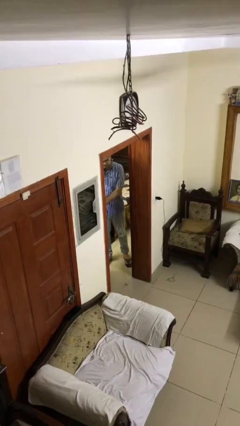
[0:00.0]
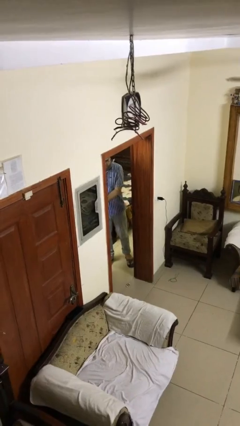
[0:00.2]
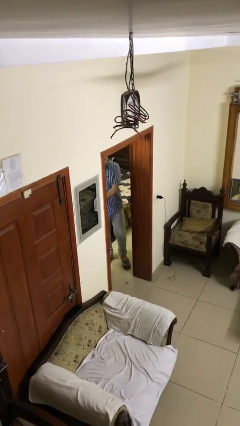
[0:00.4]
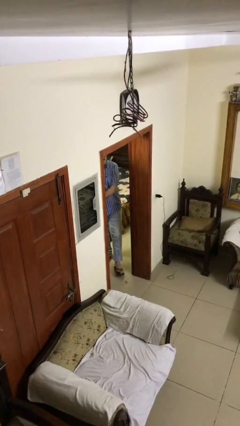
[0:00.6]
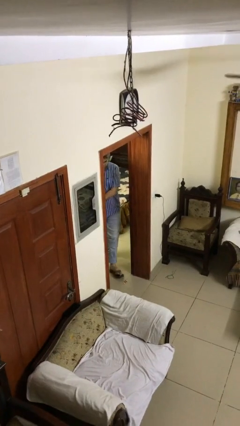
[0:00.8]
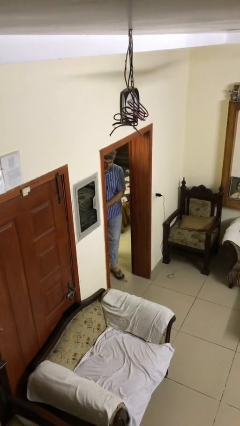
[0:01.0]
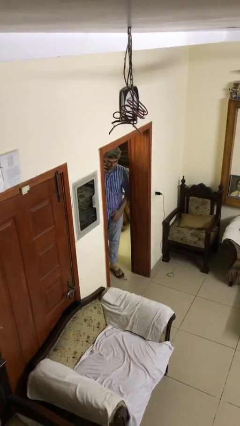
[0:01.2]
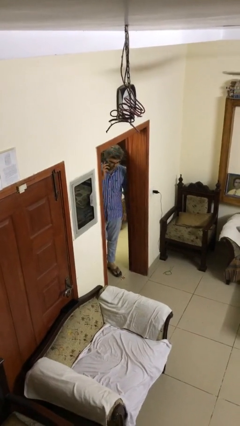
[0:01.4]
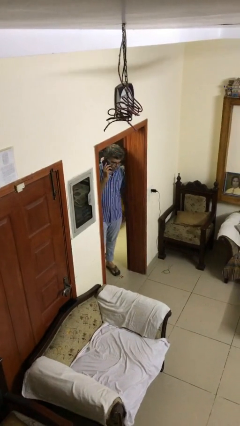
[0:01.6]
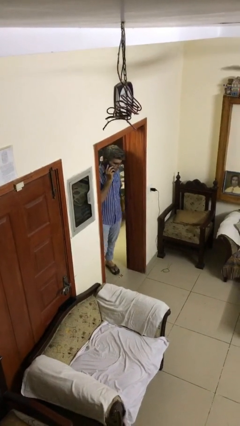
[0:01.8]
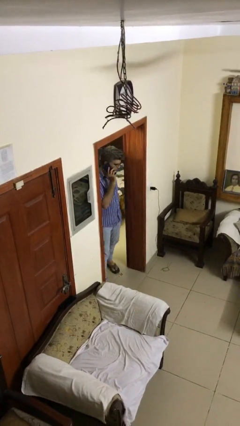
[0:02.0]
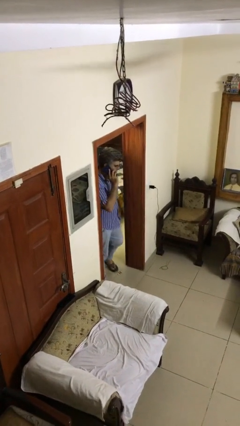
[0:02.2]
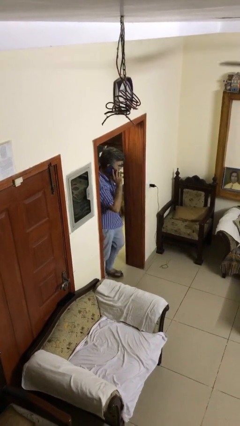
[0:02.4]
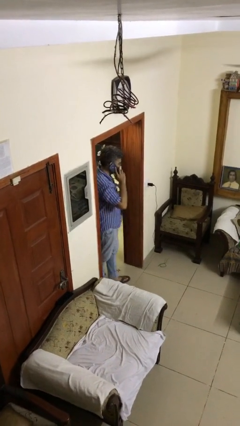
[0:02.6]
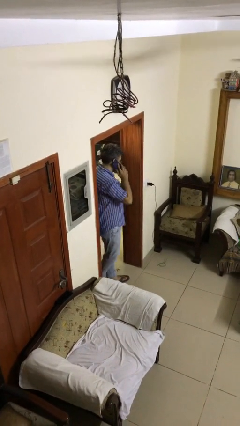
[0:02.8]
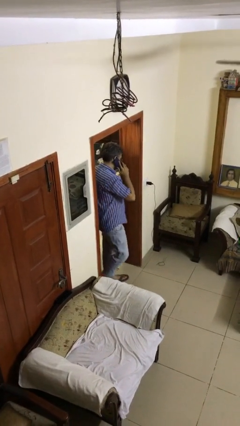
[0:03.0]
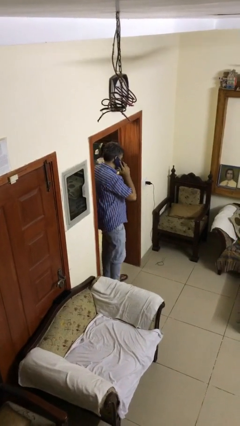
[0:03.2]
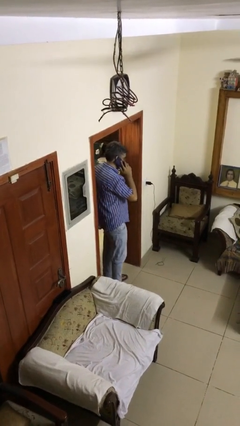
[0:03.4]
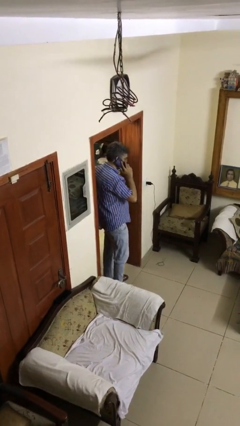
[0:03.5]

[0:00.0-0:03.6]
person enters scene through structure

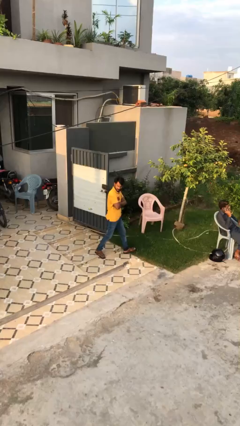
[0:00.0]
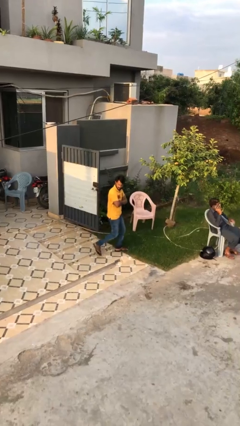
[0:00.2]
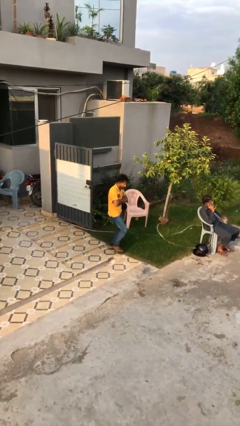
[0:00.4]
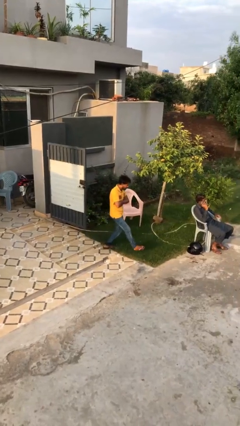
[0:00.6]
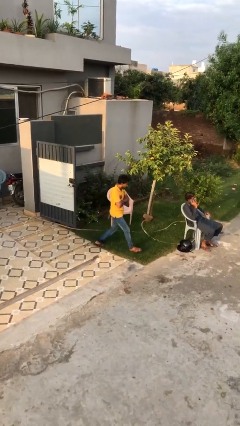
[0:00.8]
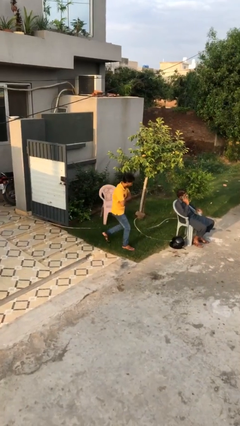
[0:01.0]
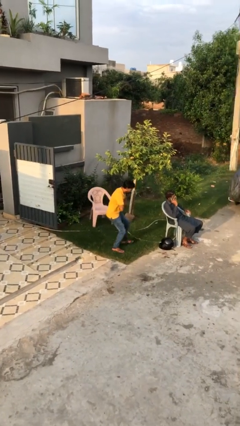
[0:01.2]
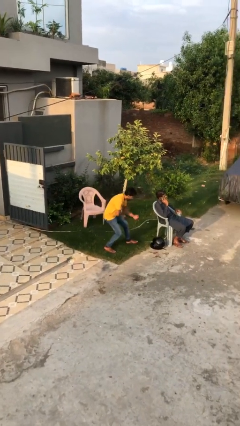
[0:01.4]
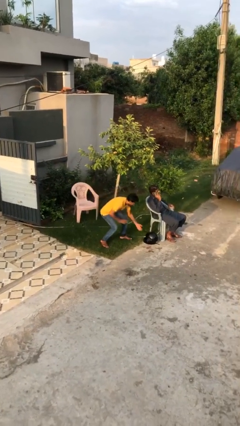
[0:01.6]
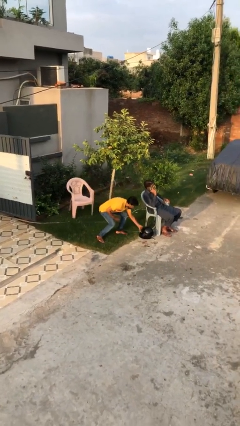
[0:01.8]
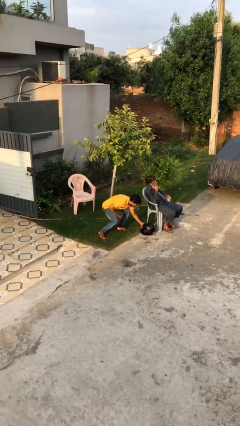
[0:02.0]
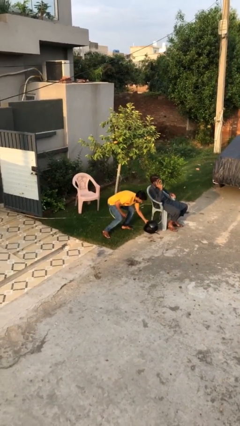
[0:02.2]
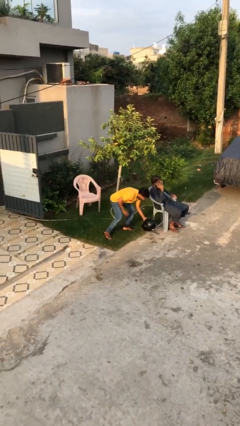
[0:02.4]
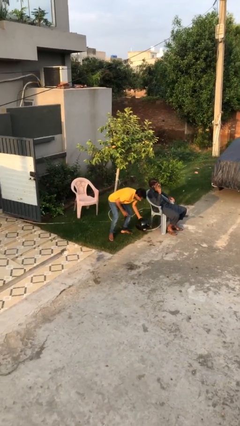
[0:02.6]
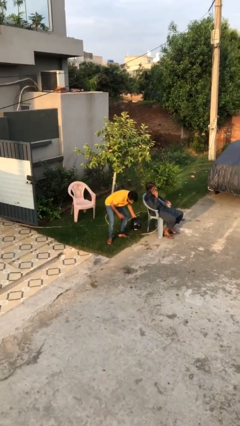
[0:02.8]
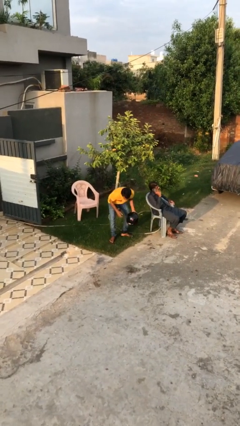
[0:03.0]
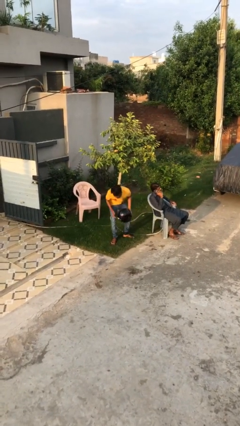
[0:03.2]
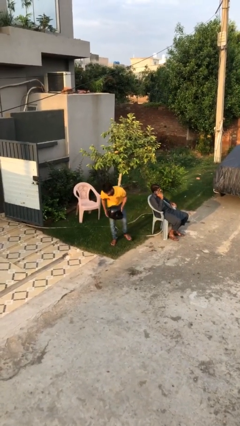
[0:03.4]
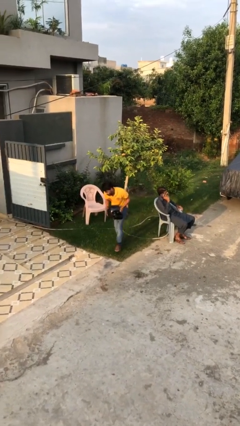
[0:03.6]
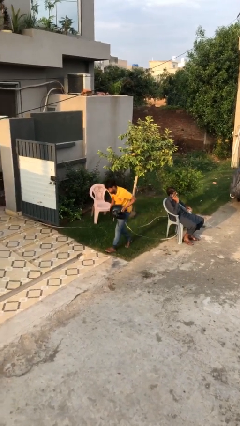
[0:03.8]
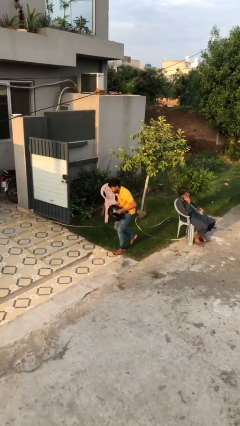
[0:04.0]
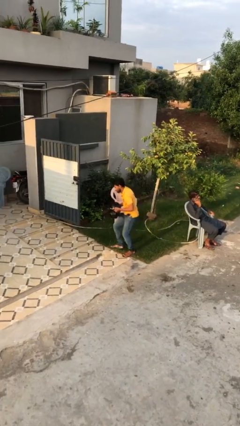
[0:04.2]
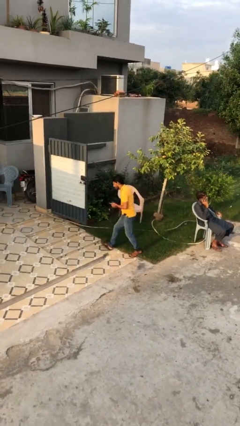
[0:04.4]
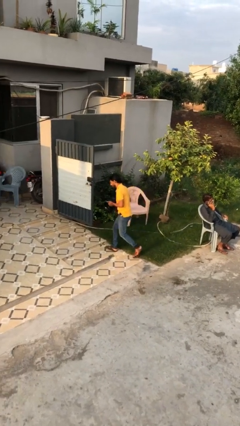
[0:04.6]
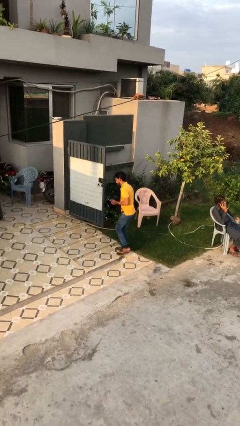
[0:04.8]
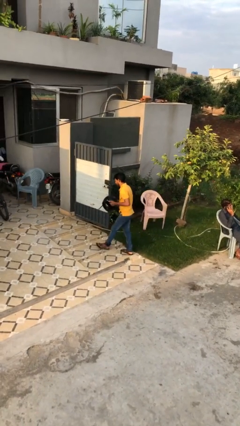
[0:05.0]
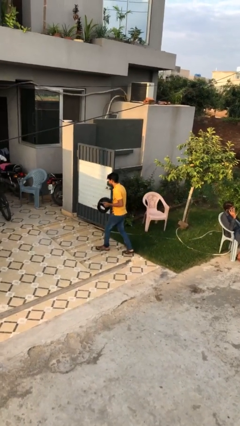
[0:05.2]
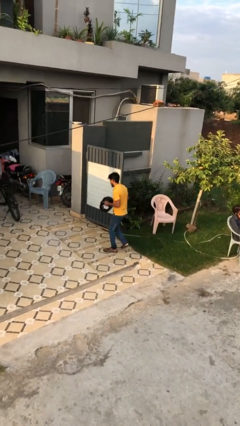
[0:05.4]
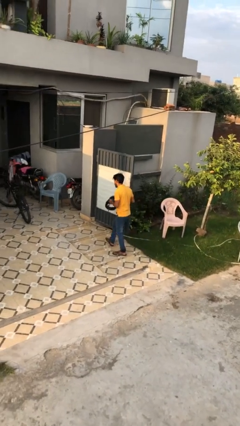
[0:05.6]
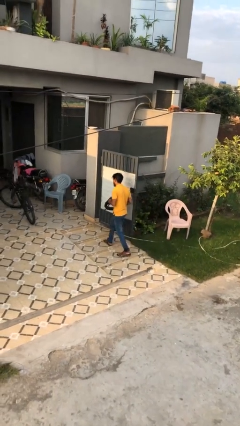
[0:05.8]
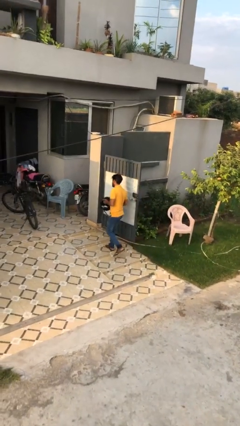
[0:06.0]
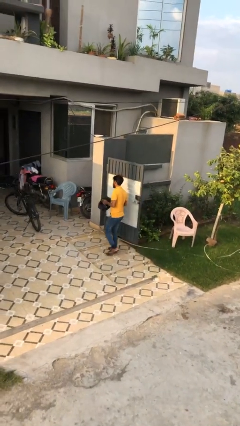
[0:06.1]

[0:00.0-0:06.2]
person steals object from person

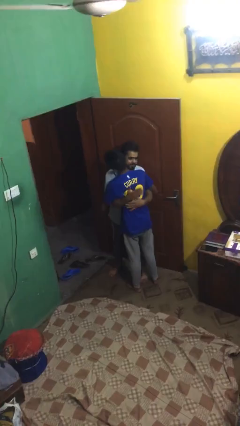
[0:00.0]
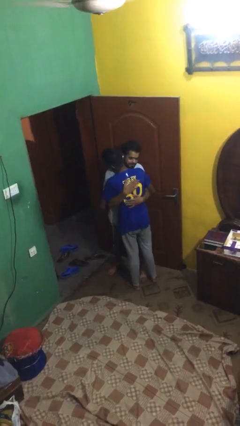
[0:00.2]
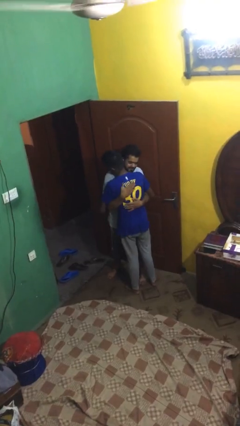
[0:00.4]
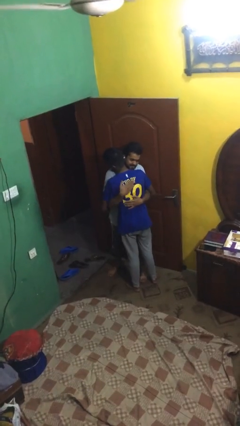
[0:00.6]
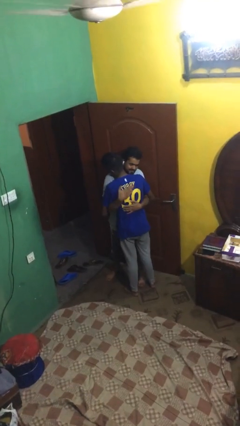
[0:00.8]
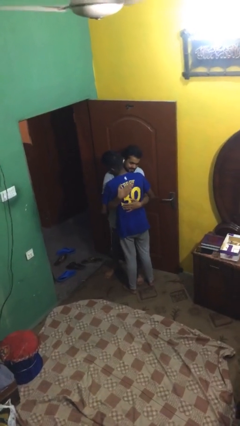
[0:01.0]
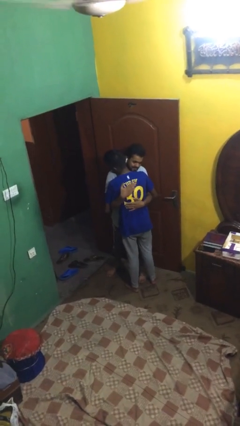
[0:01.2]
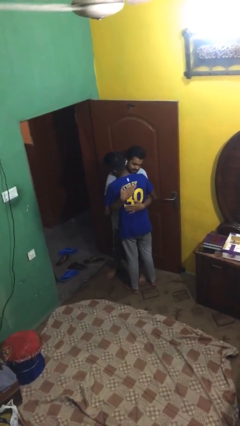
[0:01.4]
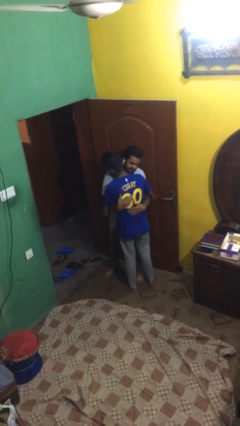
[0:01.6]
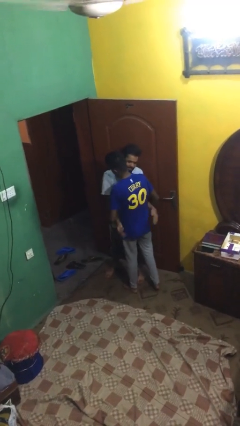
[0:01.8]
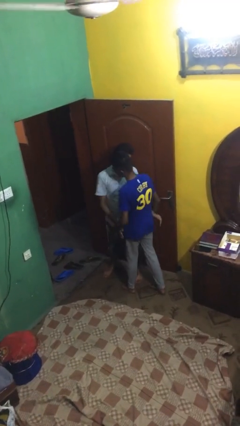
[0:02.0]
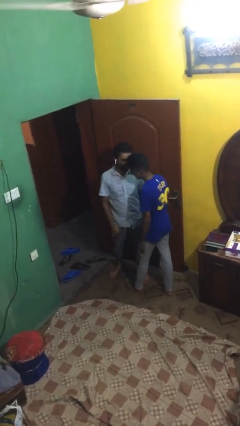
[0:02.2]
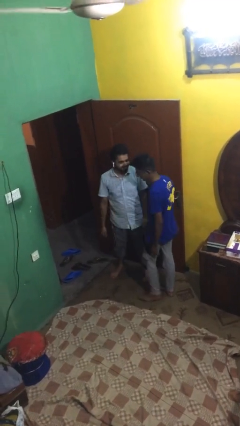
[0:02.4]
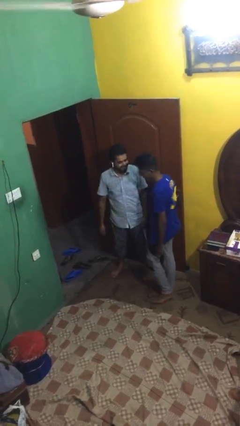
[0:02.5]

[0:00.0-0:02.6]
person embraces person

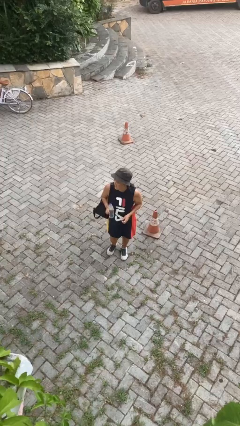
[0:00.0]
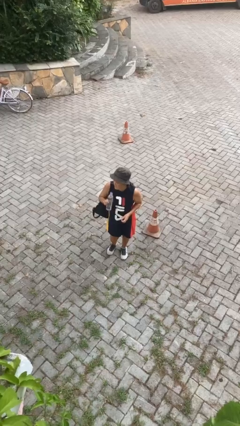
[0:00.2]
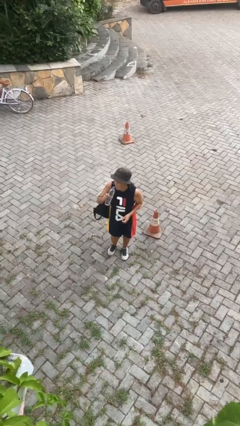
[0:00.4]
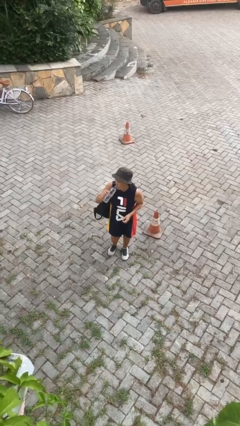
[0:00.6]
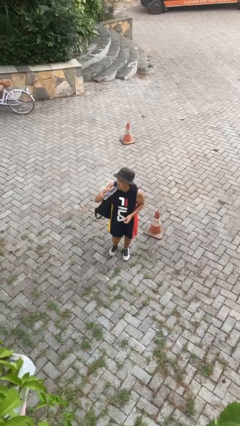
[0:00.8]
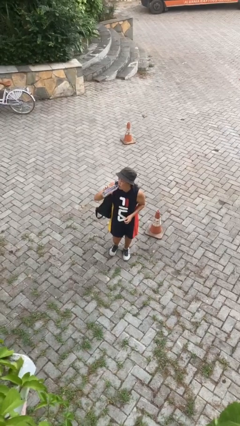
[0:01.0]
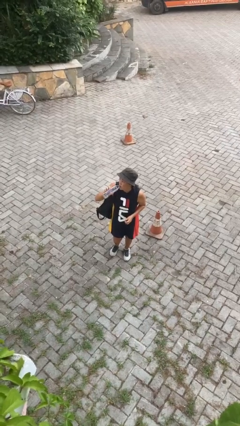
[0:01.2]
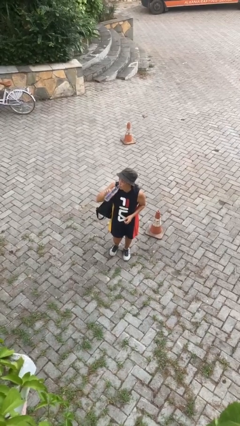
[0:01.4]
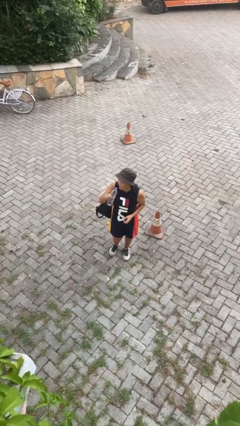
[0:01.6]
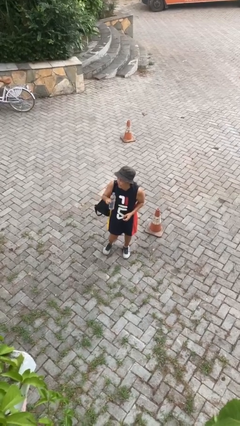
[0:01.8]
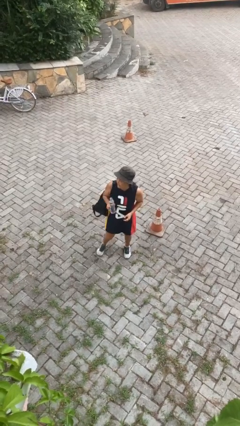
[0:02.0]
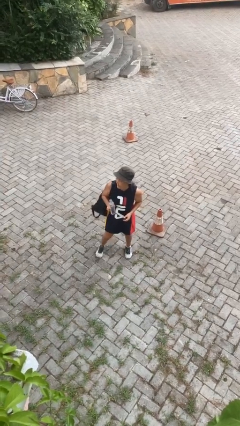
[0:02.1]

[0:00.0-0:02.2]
person drinks from bottle

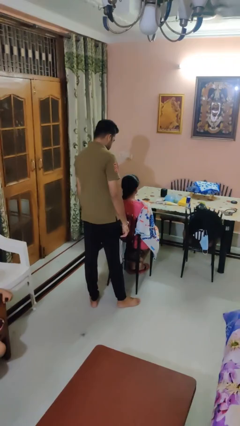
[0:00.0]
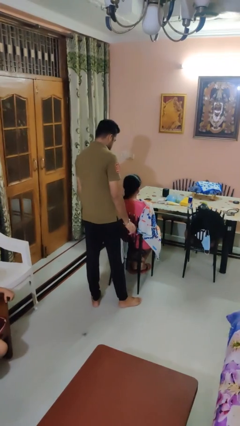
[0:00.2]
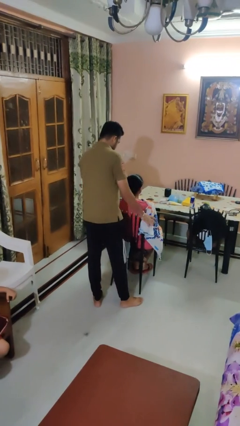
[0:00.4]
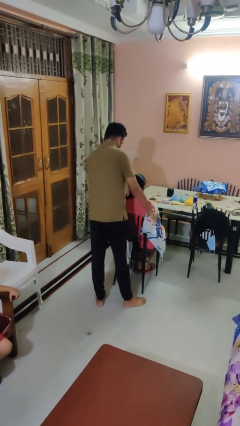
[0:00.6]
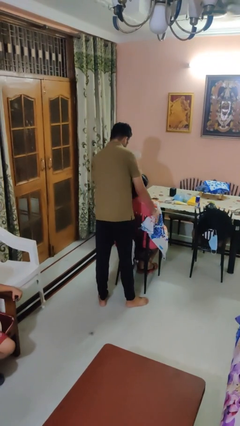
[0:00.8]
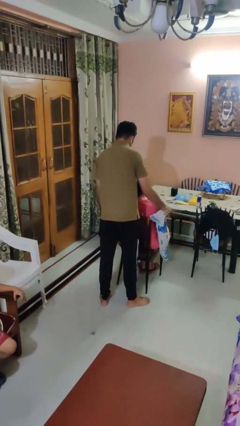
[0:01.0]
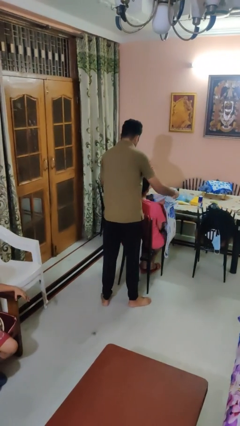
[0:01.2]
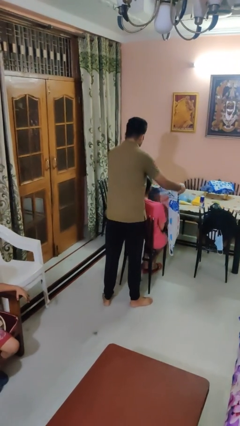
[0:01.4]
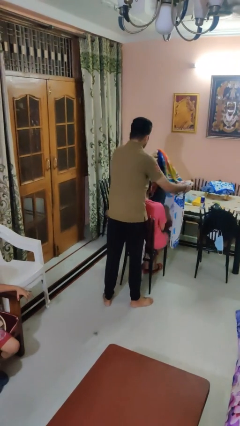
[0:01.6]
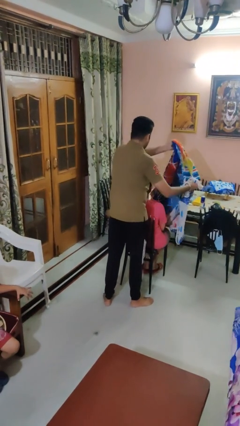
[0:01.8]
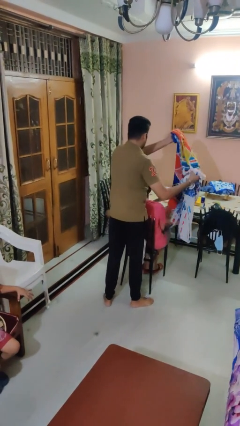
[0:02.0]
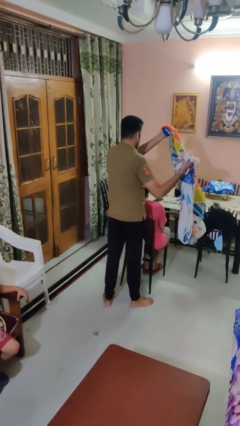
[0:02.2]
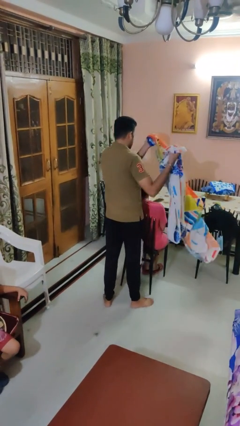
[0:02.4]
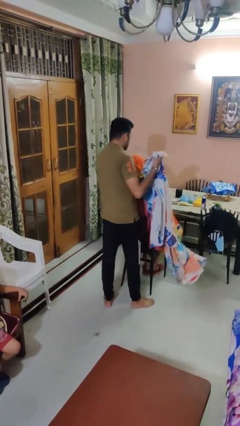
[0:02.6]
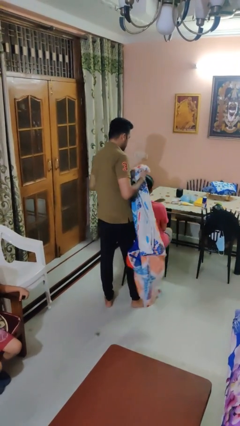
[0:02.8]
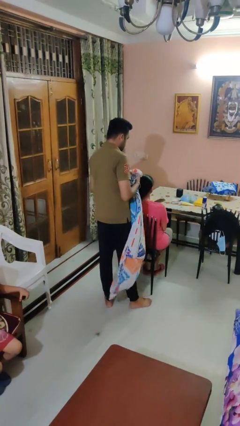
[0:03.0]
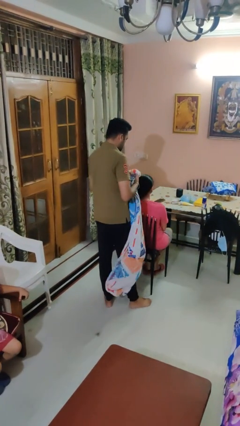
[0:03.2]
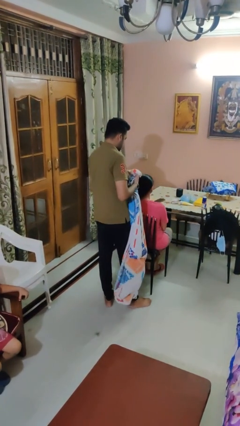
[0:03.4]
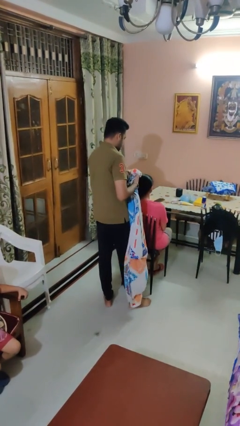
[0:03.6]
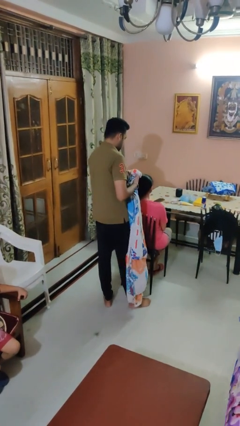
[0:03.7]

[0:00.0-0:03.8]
person uncovers friend with blanket
